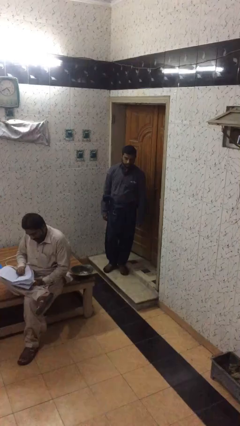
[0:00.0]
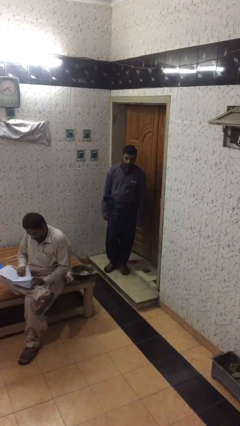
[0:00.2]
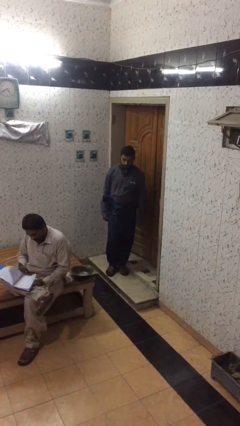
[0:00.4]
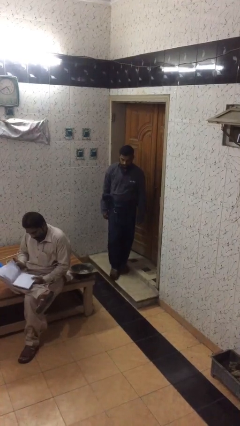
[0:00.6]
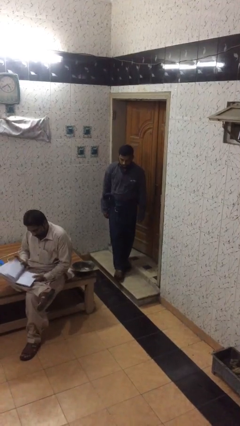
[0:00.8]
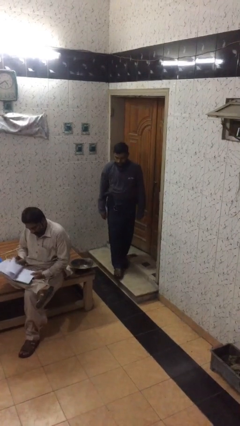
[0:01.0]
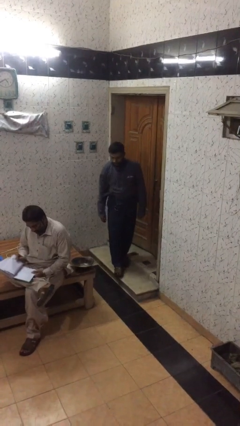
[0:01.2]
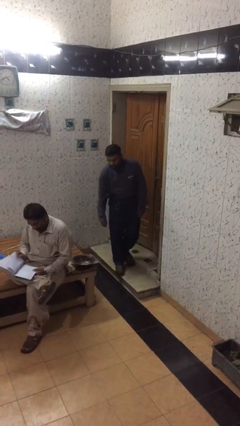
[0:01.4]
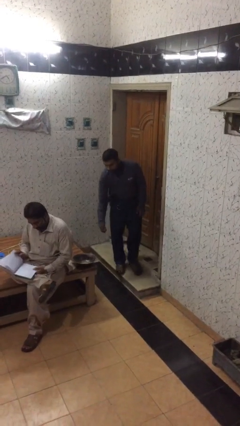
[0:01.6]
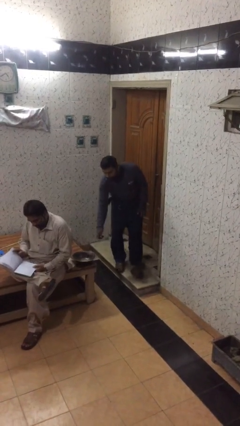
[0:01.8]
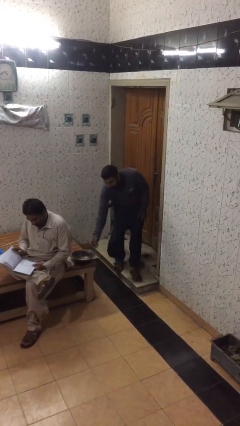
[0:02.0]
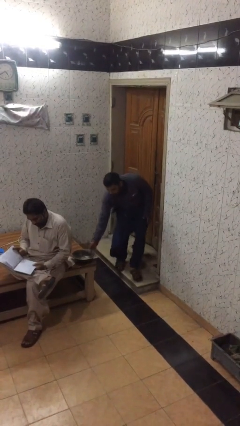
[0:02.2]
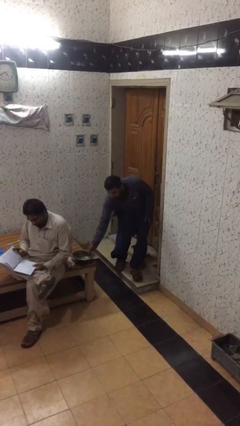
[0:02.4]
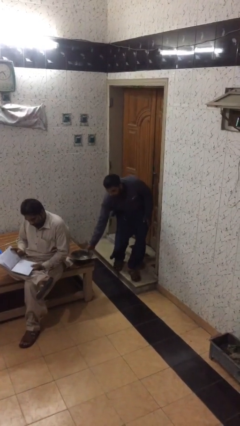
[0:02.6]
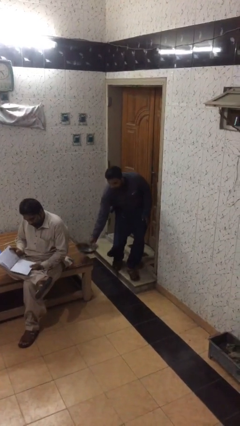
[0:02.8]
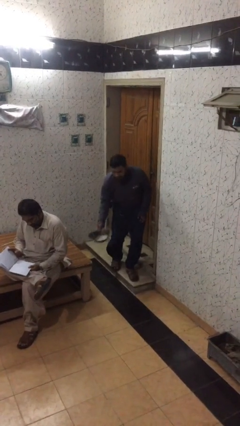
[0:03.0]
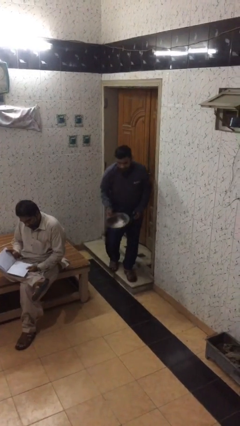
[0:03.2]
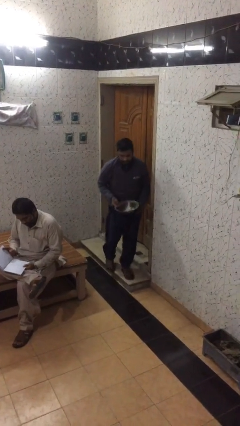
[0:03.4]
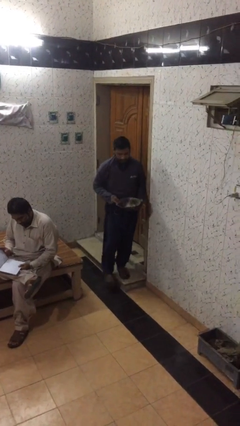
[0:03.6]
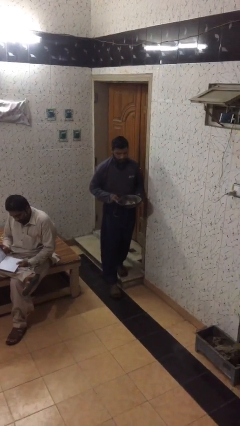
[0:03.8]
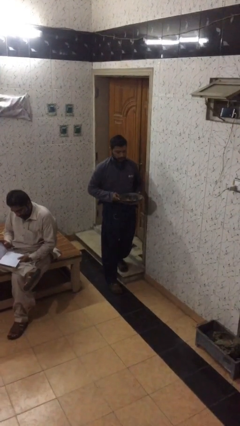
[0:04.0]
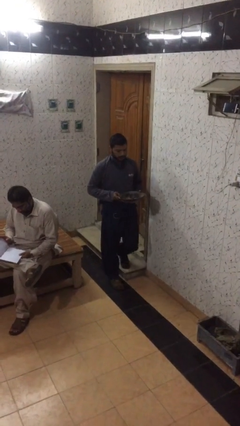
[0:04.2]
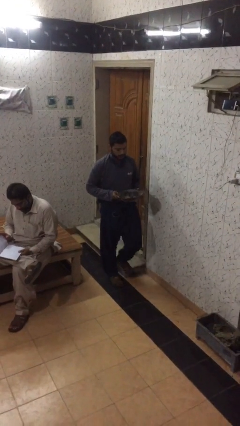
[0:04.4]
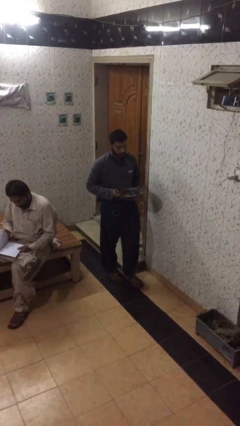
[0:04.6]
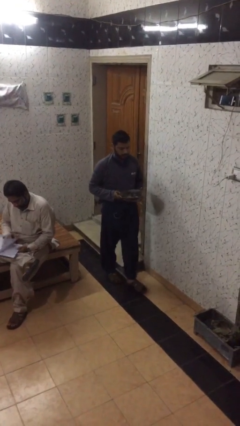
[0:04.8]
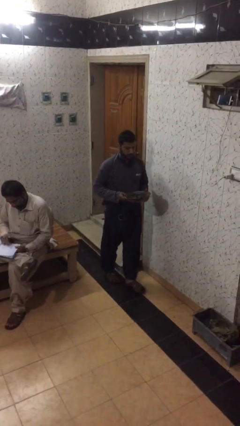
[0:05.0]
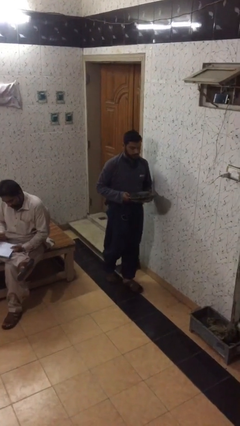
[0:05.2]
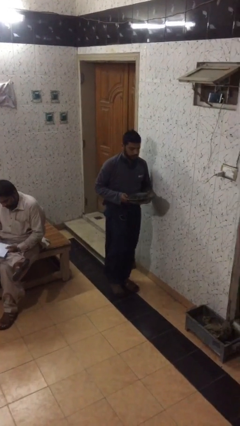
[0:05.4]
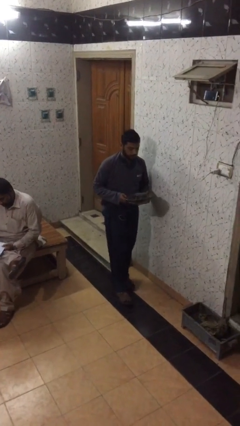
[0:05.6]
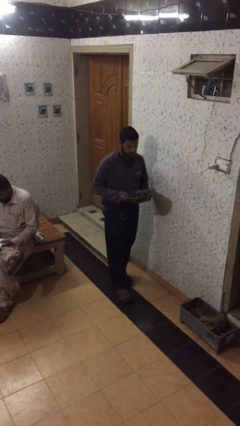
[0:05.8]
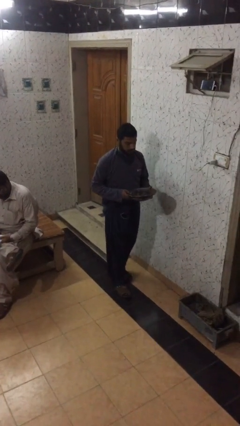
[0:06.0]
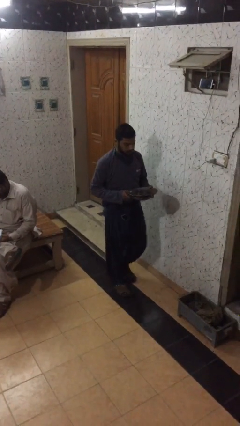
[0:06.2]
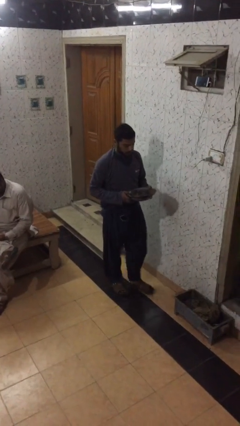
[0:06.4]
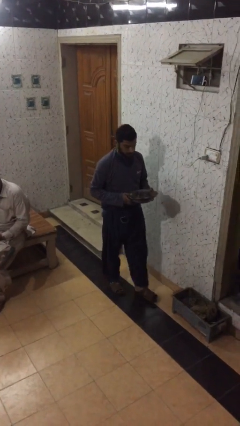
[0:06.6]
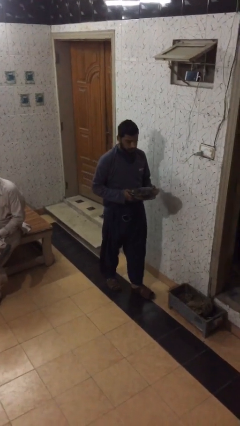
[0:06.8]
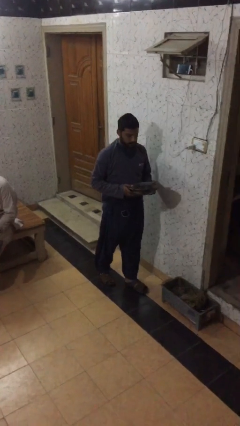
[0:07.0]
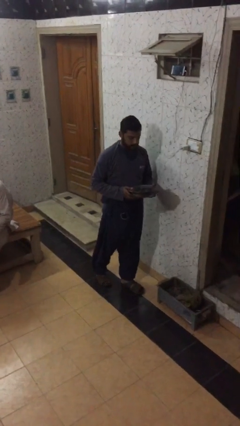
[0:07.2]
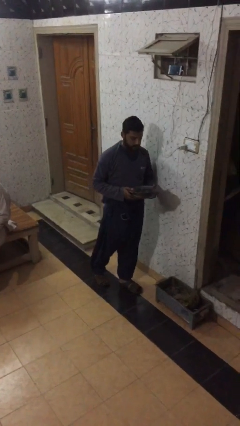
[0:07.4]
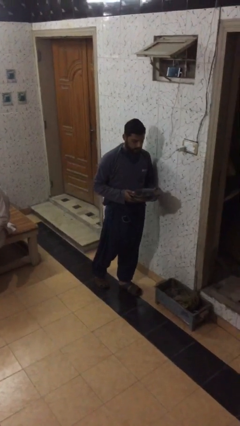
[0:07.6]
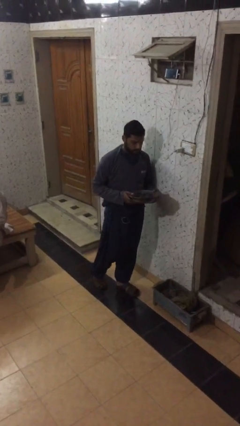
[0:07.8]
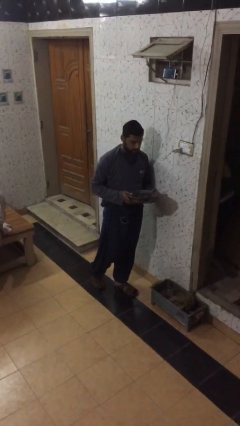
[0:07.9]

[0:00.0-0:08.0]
person steals object from person

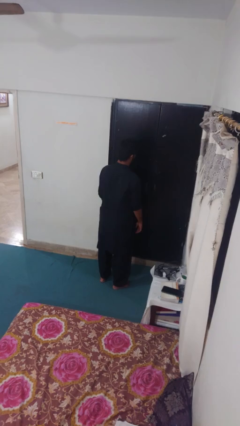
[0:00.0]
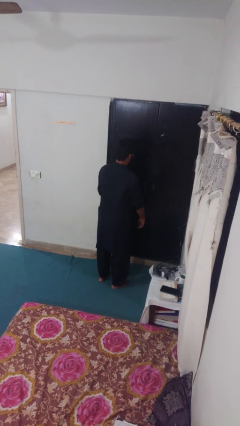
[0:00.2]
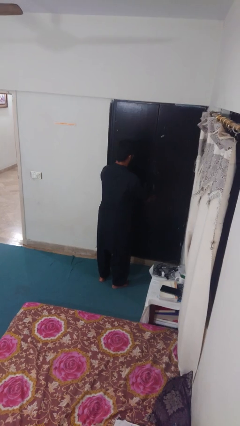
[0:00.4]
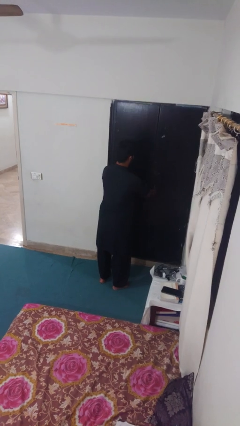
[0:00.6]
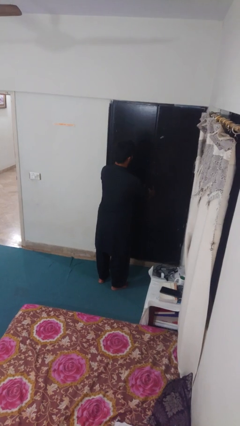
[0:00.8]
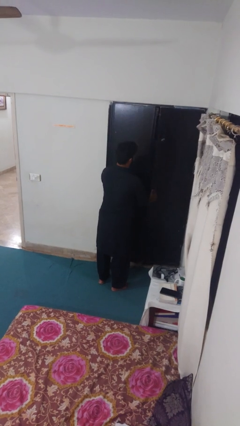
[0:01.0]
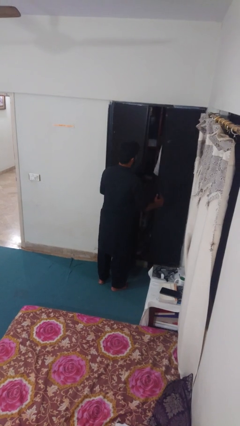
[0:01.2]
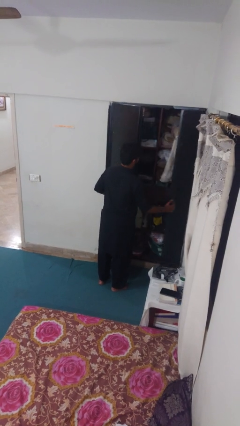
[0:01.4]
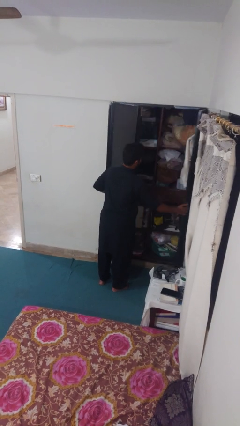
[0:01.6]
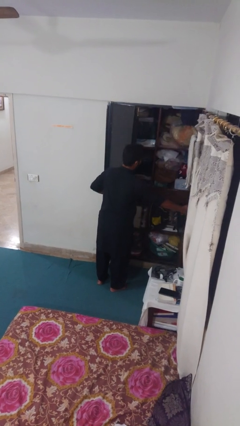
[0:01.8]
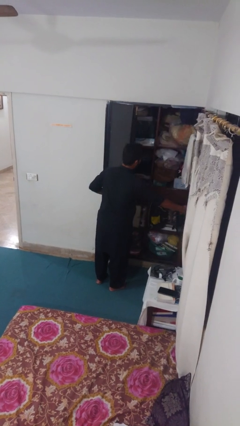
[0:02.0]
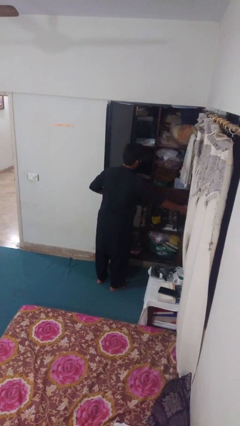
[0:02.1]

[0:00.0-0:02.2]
person opens closet door

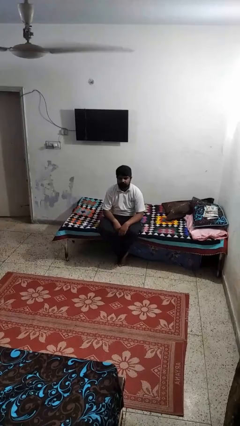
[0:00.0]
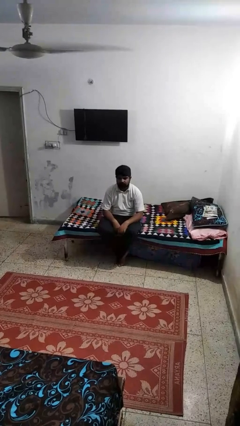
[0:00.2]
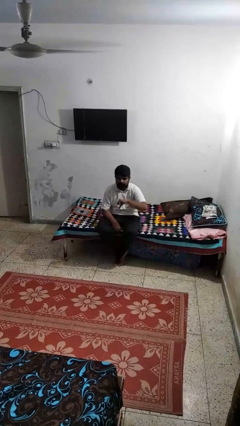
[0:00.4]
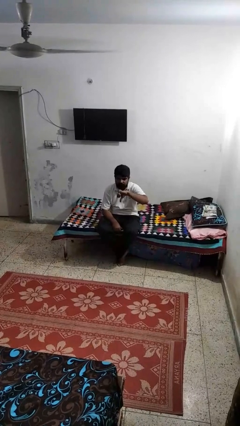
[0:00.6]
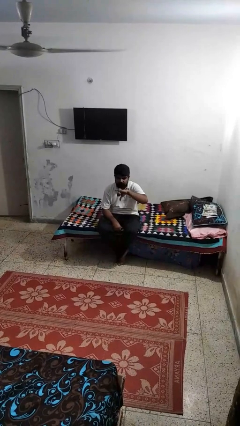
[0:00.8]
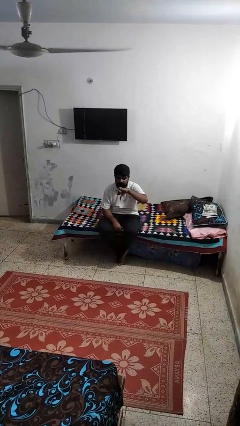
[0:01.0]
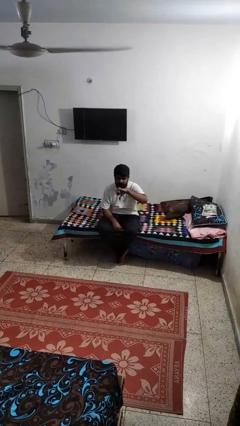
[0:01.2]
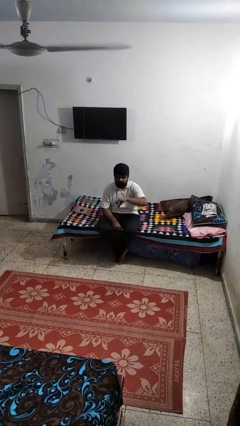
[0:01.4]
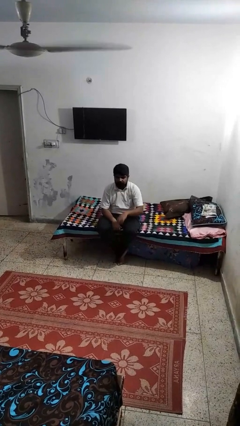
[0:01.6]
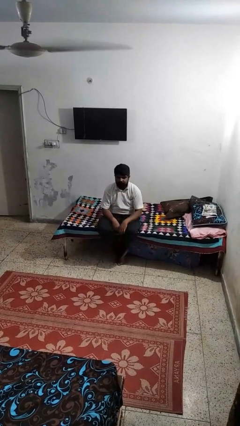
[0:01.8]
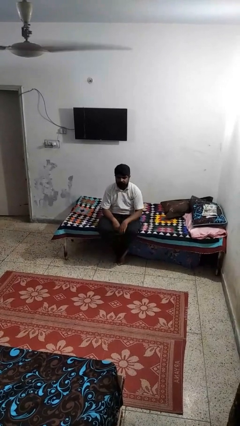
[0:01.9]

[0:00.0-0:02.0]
person gestures thumbs down

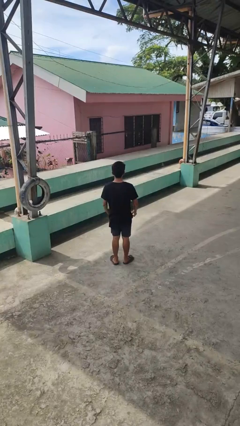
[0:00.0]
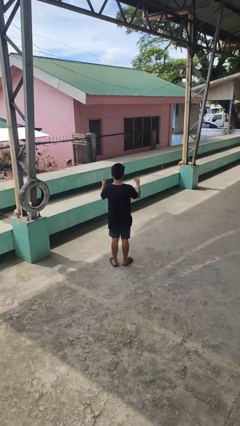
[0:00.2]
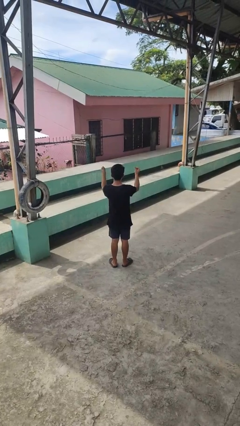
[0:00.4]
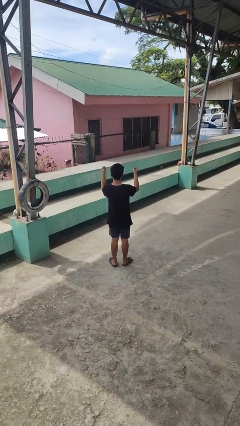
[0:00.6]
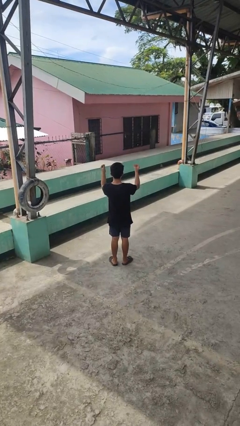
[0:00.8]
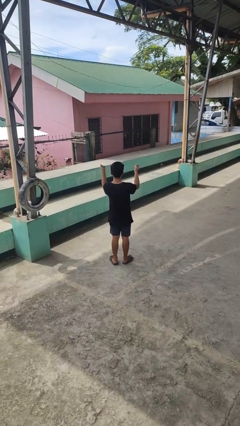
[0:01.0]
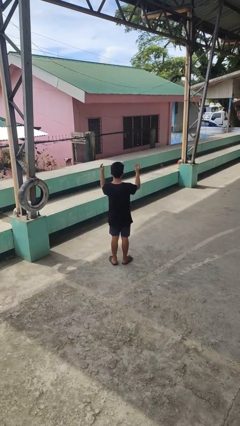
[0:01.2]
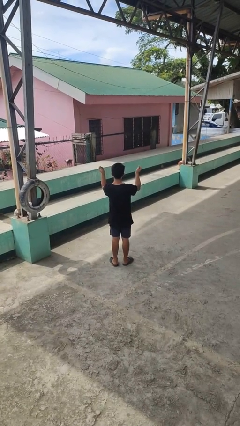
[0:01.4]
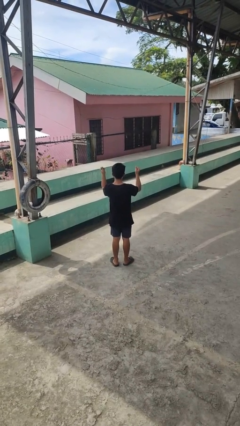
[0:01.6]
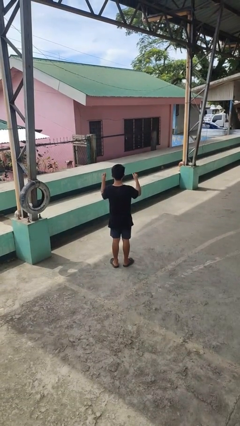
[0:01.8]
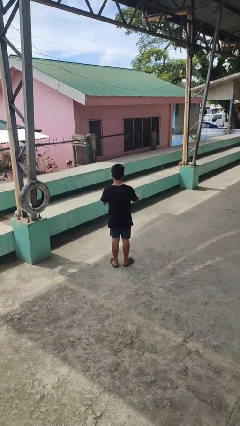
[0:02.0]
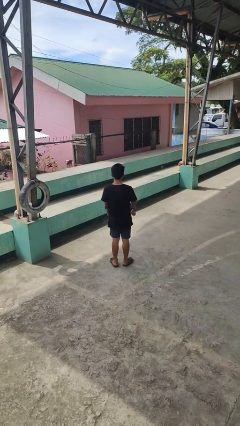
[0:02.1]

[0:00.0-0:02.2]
person snaps fingers

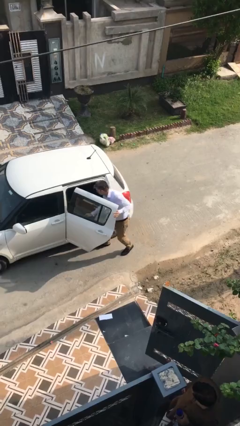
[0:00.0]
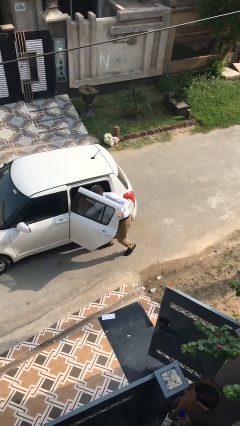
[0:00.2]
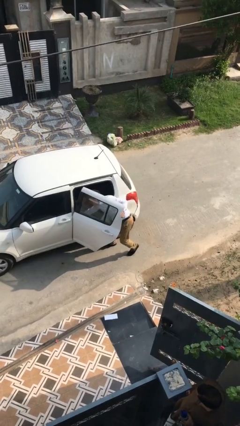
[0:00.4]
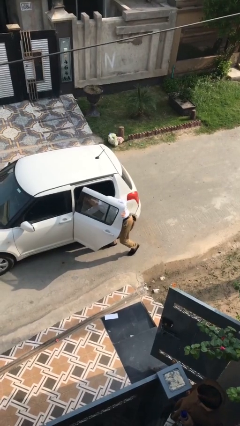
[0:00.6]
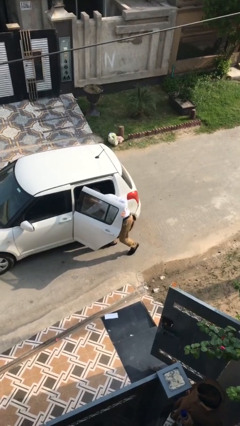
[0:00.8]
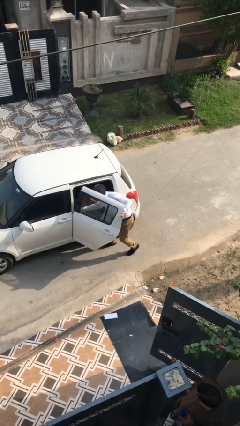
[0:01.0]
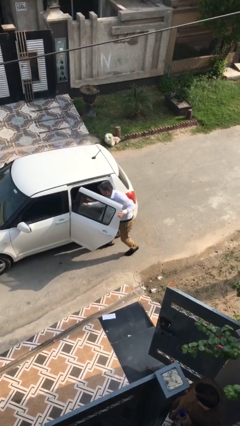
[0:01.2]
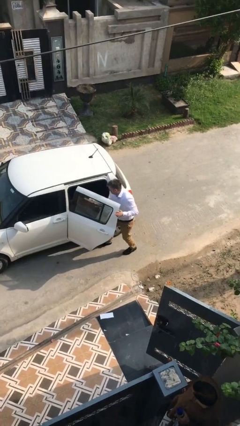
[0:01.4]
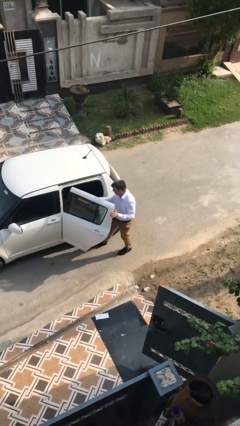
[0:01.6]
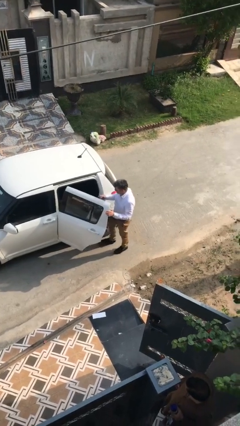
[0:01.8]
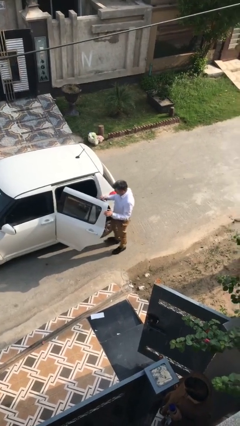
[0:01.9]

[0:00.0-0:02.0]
person unloads car

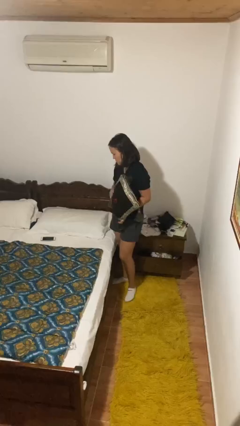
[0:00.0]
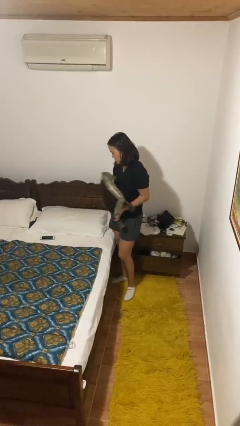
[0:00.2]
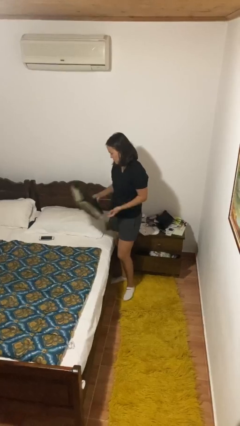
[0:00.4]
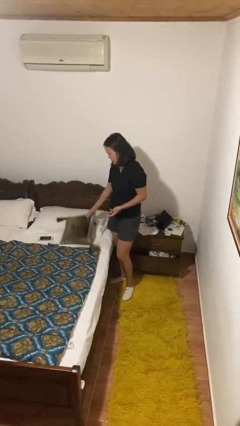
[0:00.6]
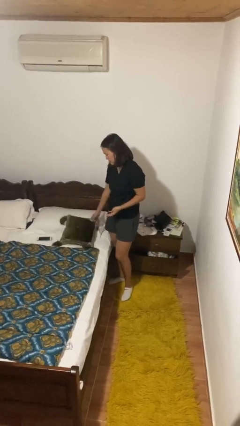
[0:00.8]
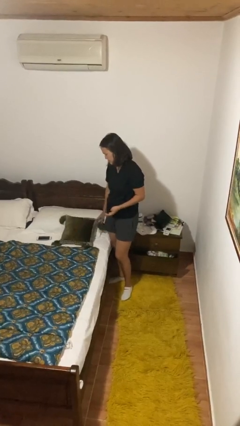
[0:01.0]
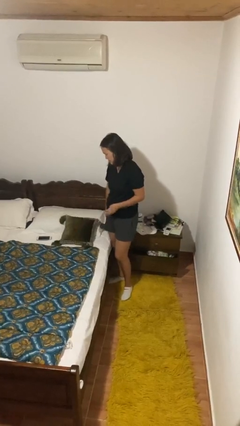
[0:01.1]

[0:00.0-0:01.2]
person puts down object on bed

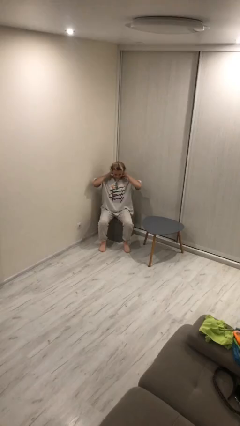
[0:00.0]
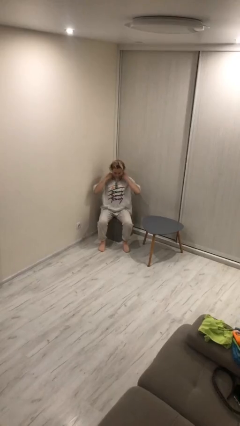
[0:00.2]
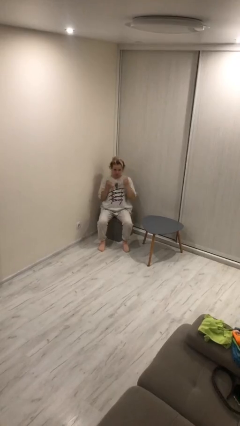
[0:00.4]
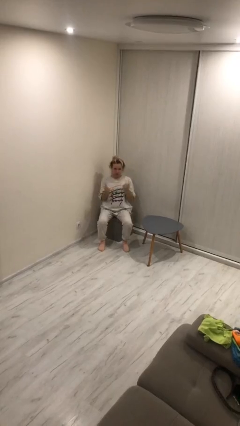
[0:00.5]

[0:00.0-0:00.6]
person takes off necklace
